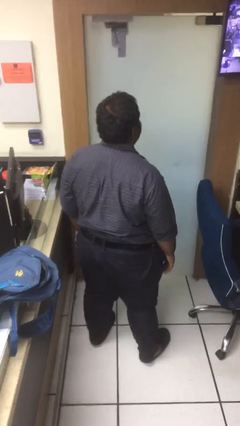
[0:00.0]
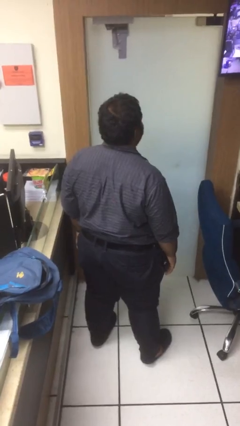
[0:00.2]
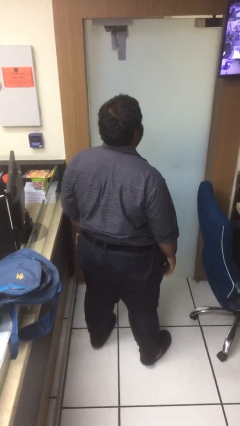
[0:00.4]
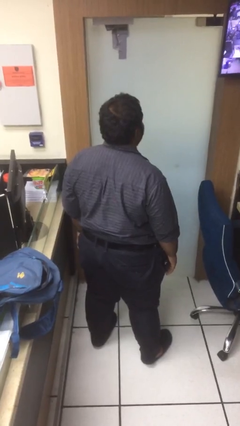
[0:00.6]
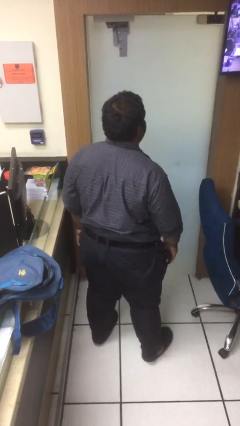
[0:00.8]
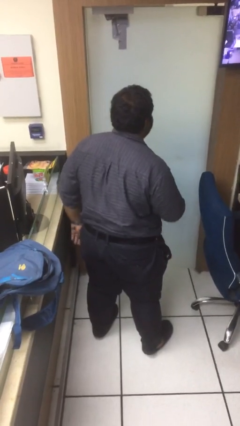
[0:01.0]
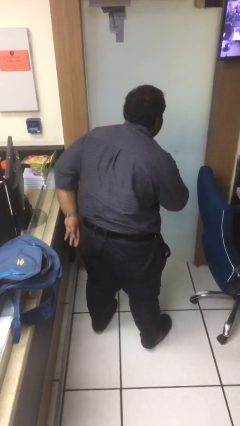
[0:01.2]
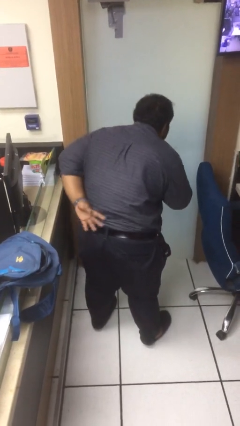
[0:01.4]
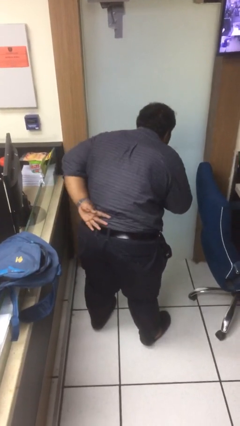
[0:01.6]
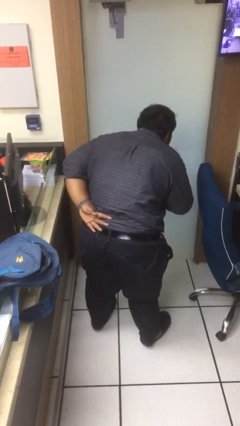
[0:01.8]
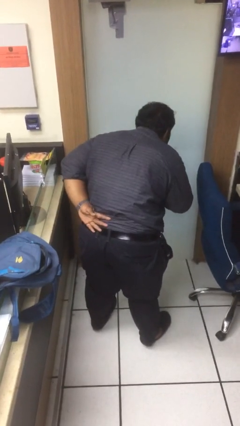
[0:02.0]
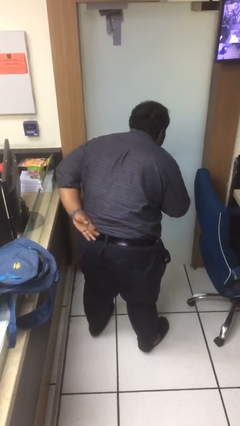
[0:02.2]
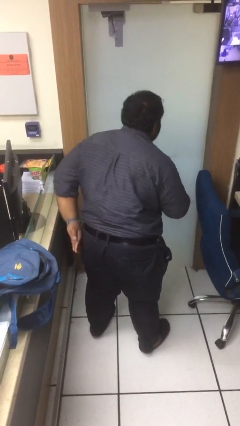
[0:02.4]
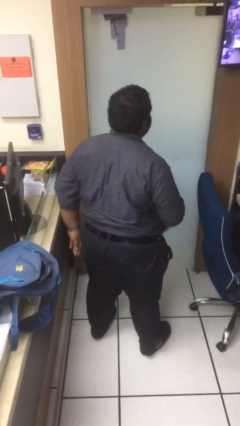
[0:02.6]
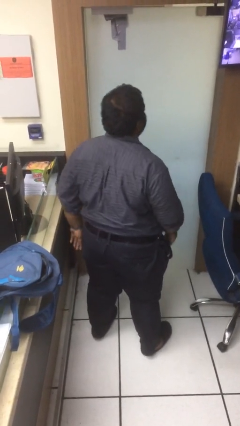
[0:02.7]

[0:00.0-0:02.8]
person bows

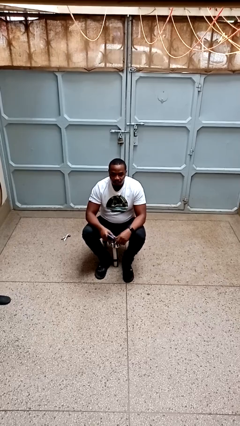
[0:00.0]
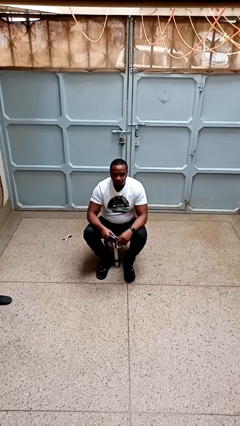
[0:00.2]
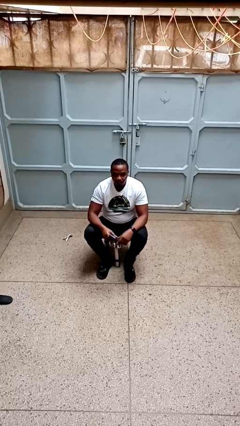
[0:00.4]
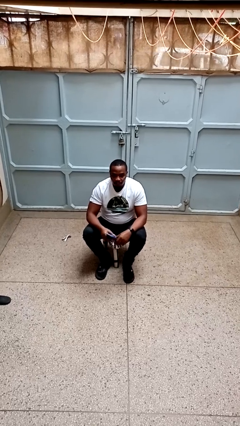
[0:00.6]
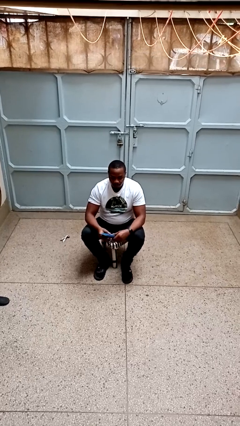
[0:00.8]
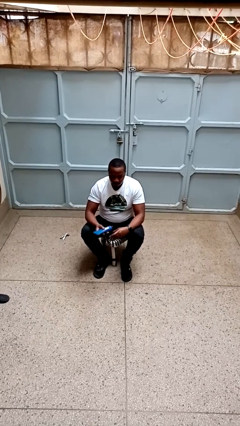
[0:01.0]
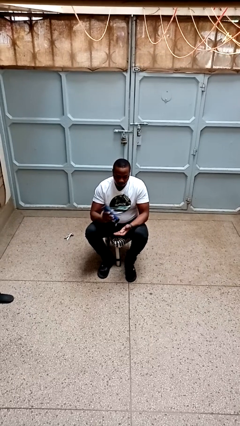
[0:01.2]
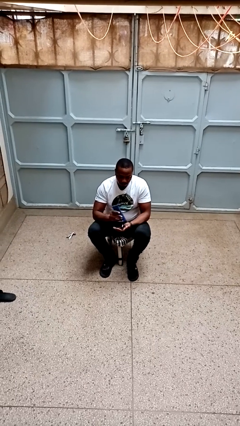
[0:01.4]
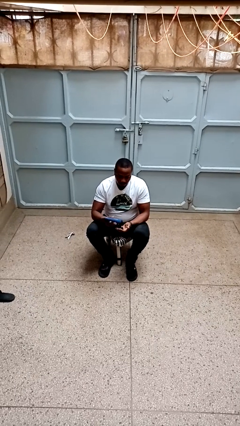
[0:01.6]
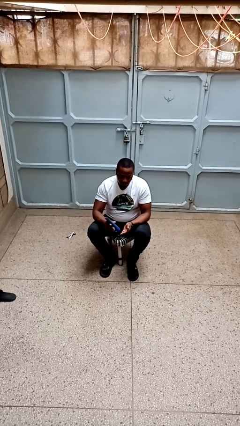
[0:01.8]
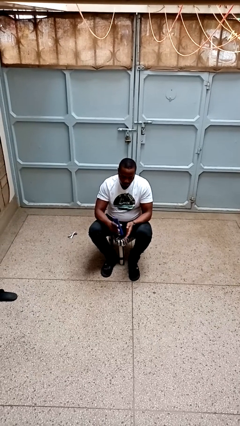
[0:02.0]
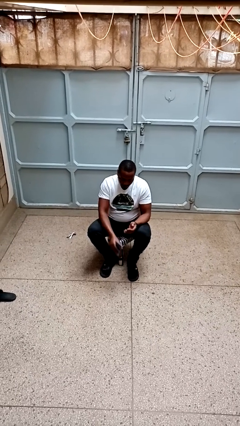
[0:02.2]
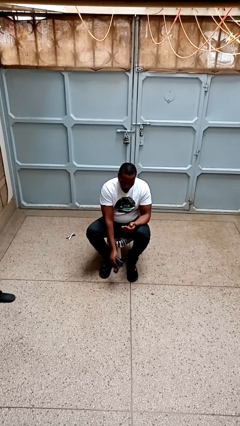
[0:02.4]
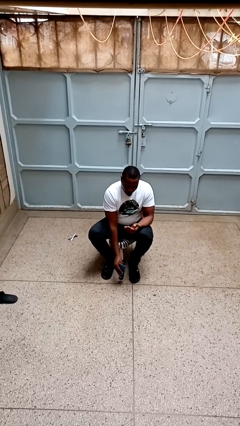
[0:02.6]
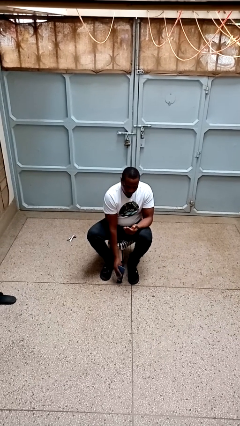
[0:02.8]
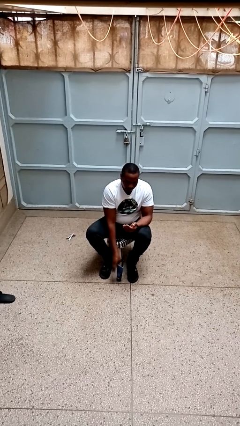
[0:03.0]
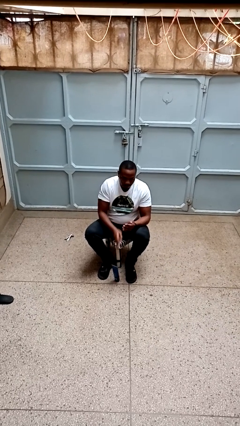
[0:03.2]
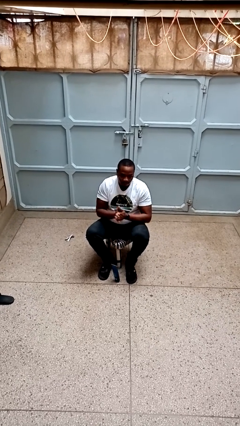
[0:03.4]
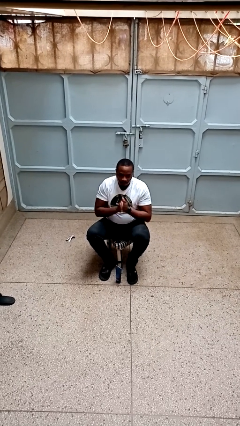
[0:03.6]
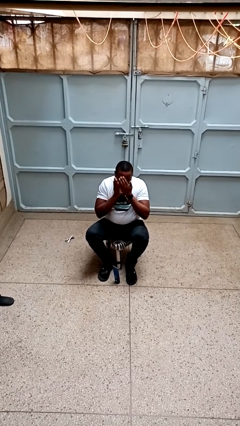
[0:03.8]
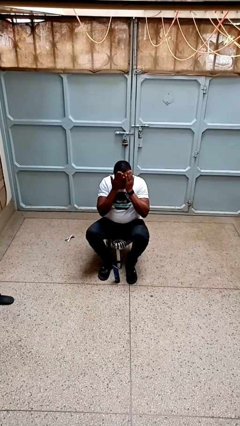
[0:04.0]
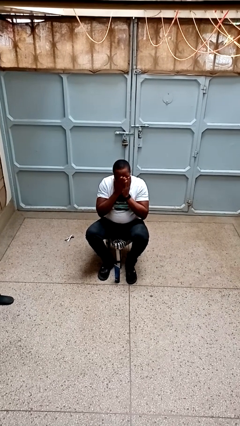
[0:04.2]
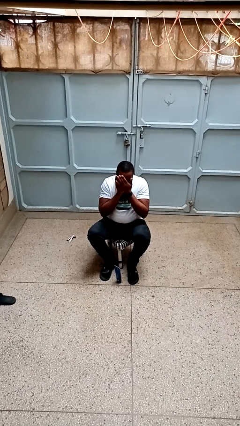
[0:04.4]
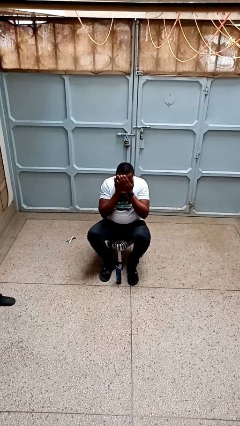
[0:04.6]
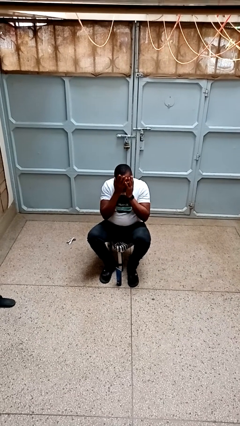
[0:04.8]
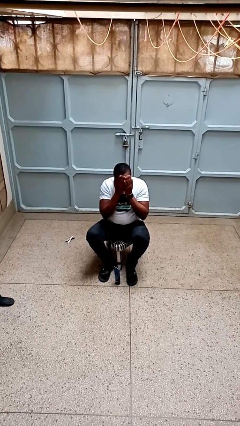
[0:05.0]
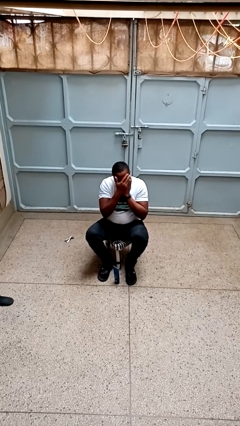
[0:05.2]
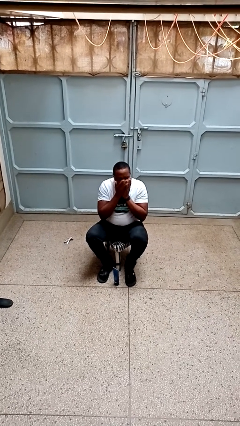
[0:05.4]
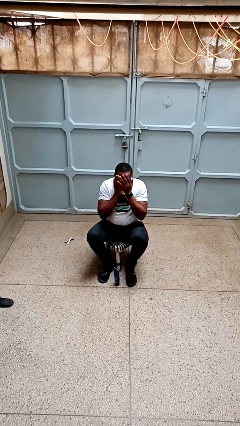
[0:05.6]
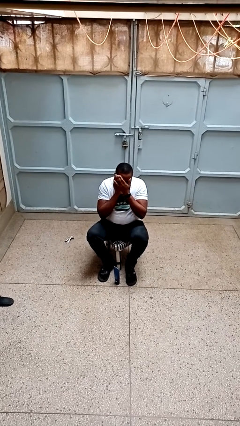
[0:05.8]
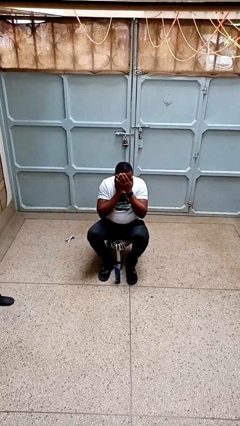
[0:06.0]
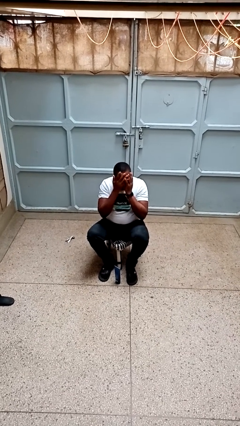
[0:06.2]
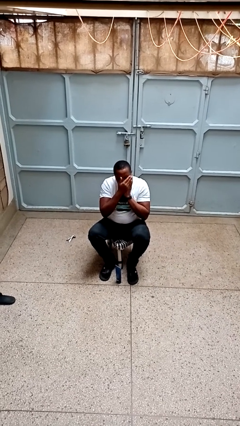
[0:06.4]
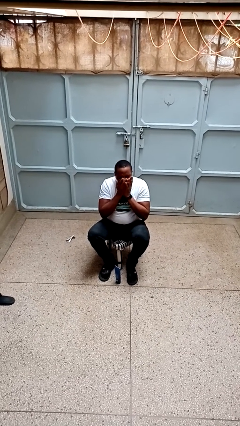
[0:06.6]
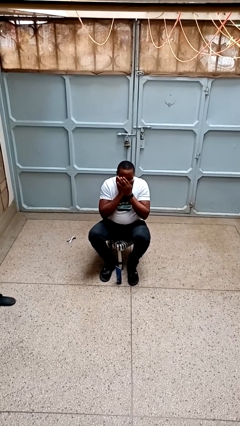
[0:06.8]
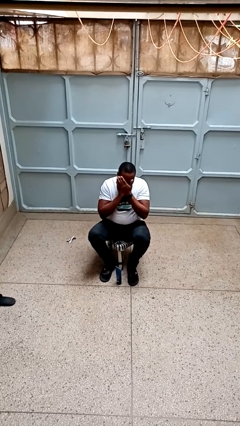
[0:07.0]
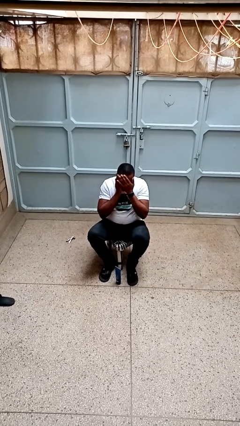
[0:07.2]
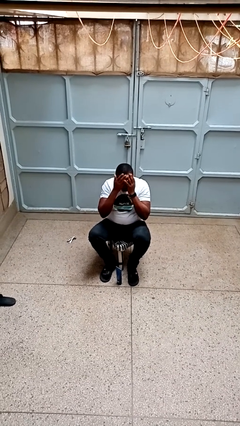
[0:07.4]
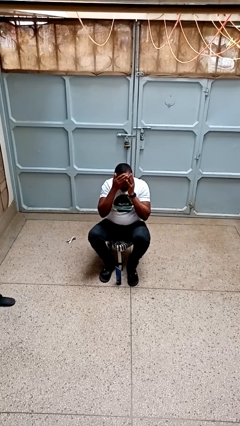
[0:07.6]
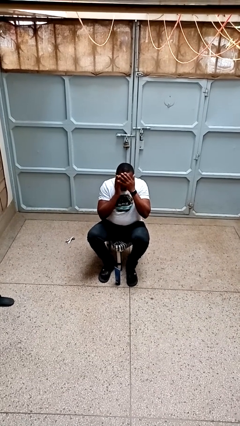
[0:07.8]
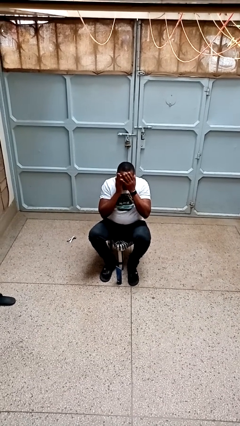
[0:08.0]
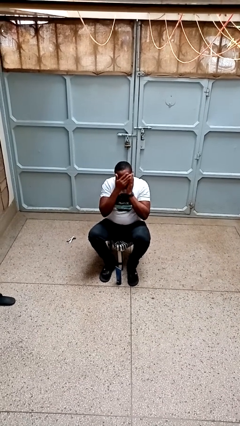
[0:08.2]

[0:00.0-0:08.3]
person applies facial moisturizer

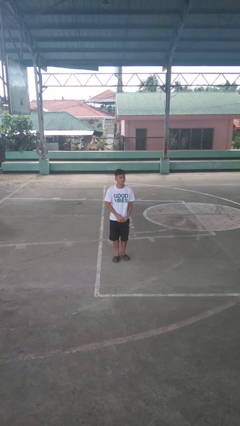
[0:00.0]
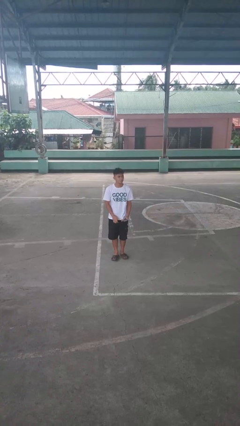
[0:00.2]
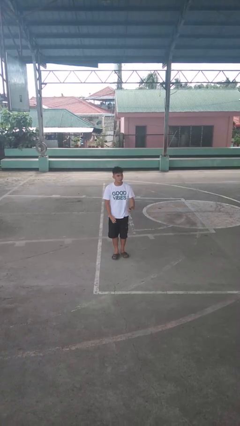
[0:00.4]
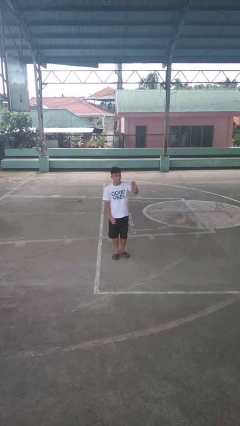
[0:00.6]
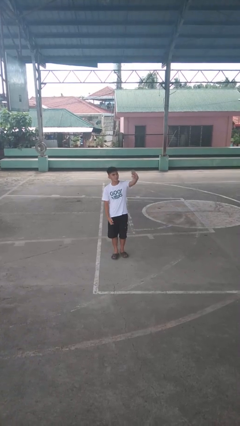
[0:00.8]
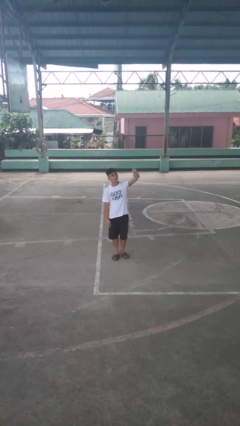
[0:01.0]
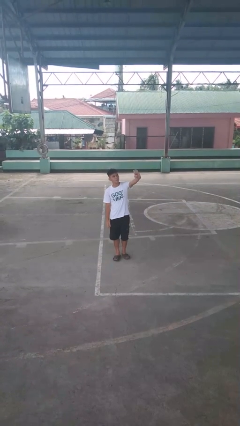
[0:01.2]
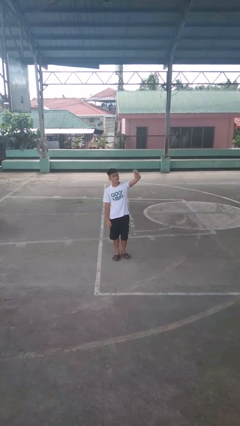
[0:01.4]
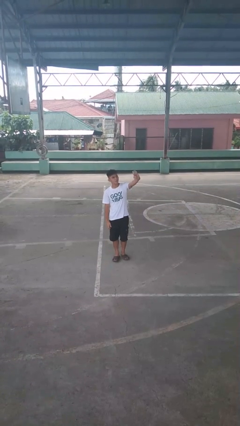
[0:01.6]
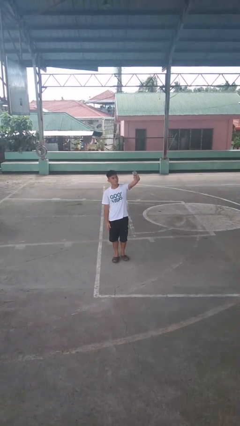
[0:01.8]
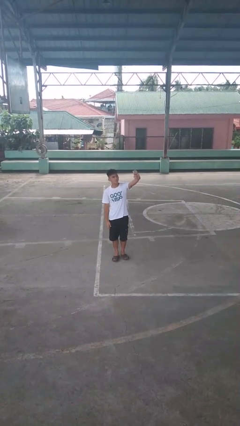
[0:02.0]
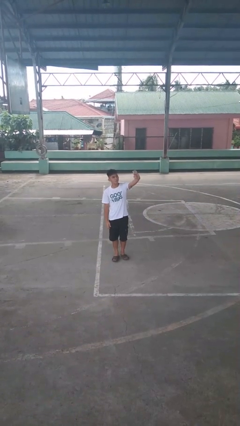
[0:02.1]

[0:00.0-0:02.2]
person takes selfie

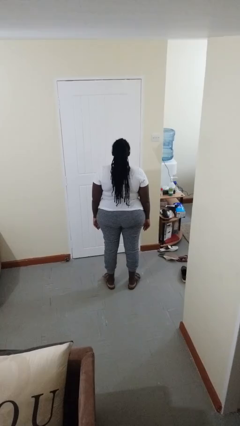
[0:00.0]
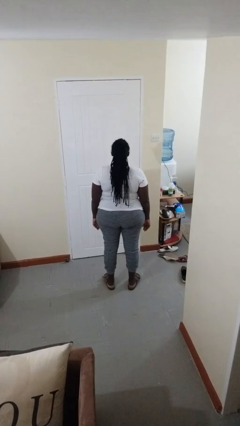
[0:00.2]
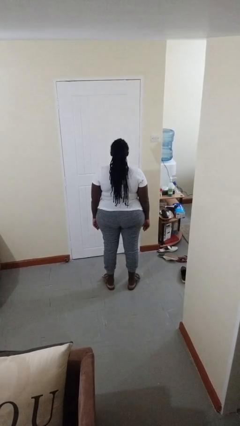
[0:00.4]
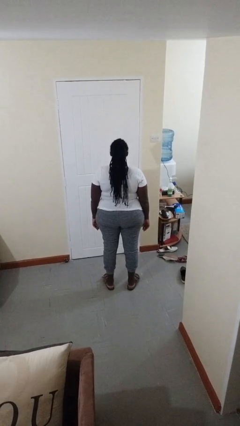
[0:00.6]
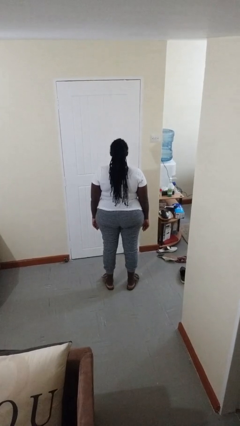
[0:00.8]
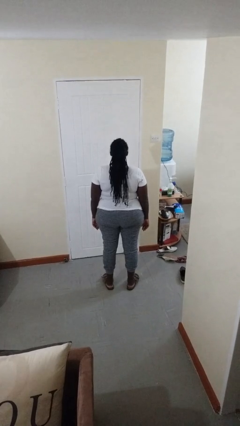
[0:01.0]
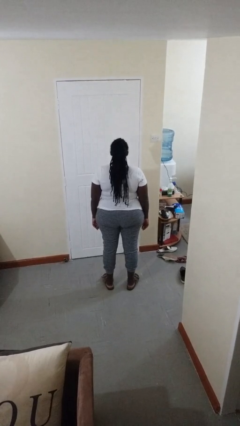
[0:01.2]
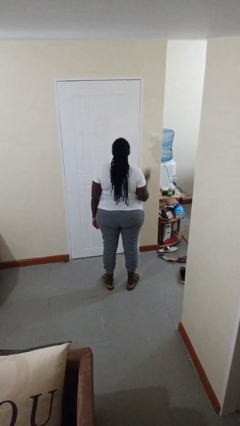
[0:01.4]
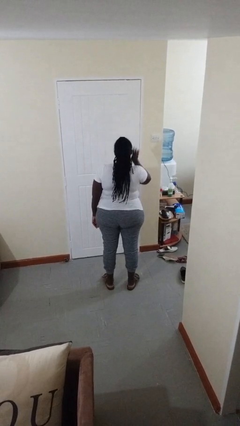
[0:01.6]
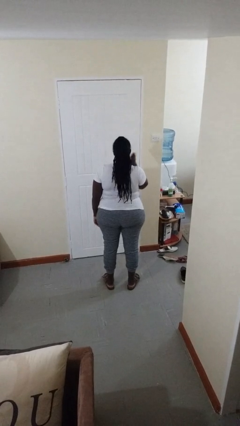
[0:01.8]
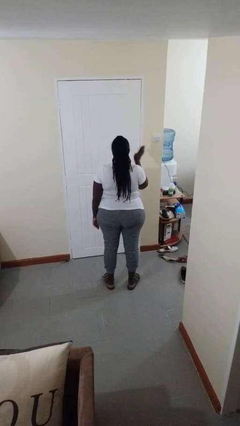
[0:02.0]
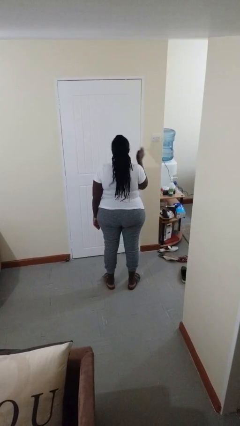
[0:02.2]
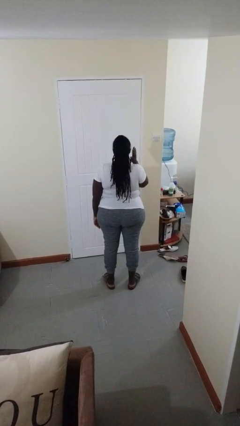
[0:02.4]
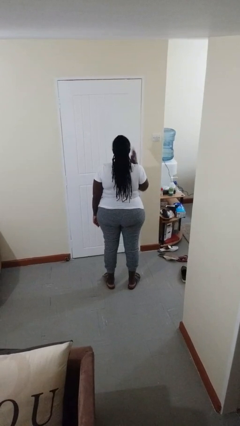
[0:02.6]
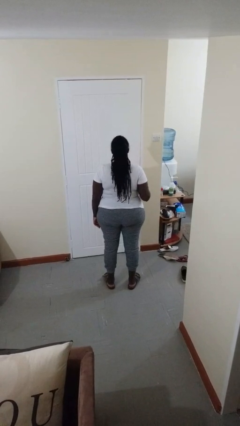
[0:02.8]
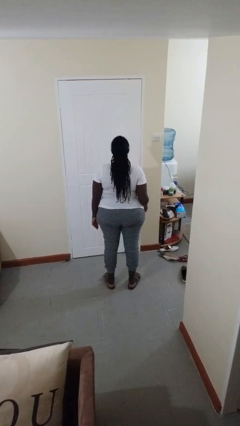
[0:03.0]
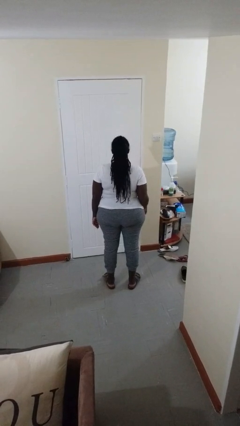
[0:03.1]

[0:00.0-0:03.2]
person swats bug

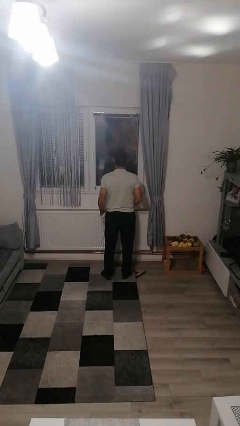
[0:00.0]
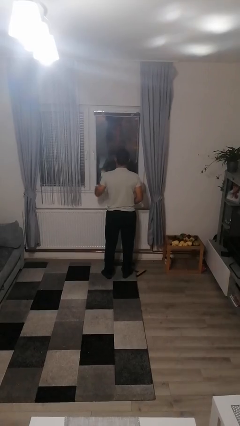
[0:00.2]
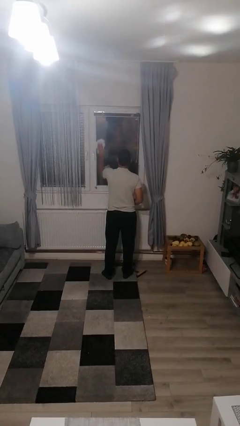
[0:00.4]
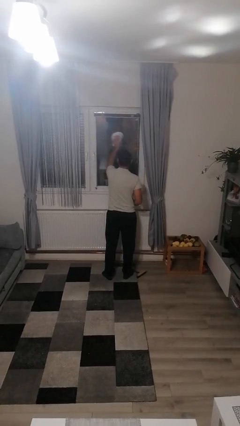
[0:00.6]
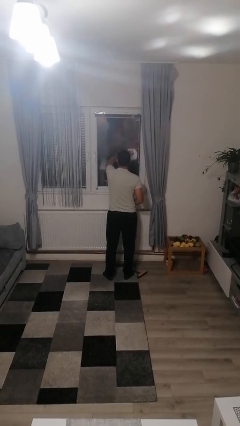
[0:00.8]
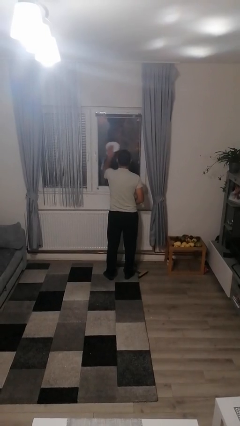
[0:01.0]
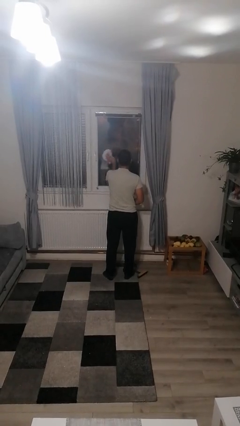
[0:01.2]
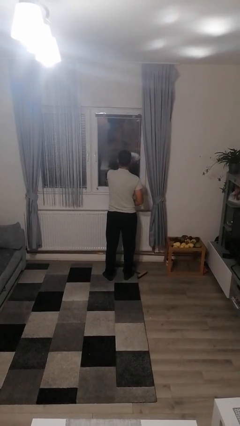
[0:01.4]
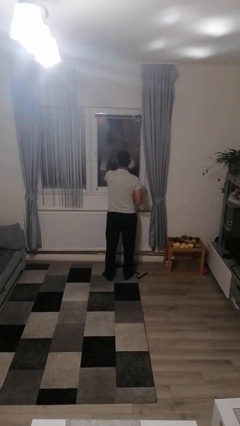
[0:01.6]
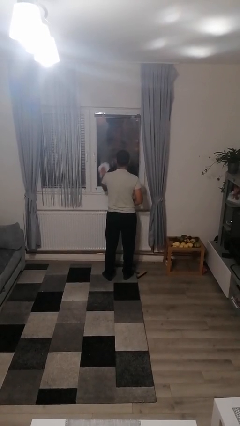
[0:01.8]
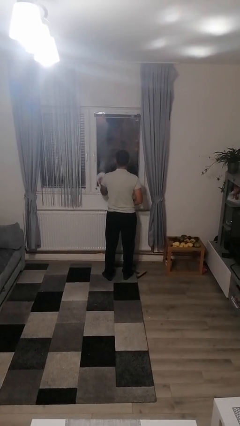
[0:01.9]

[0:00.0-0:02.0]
person washes window
